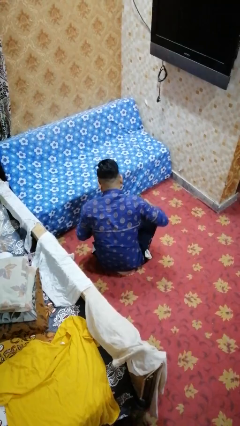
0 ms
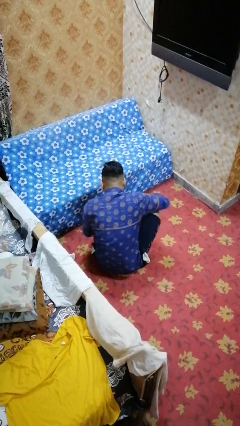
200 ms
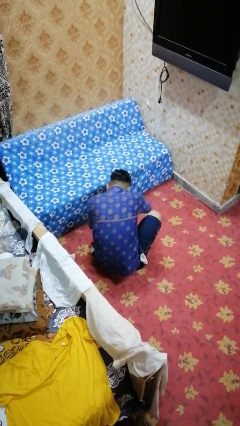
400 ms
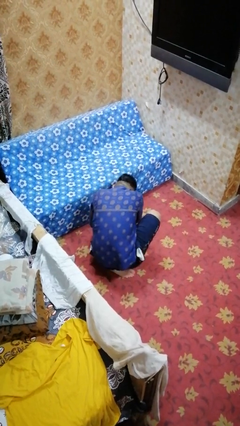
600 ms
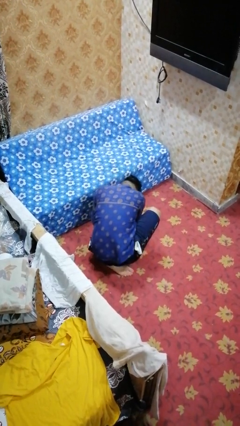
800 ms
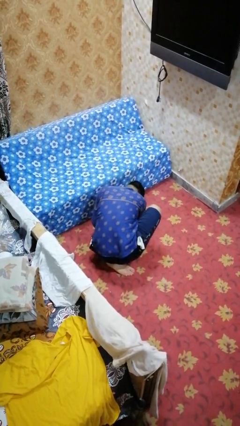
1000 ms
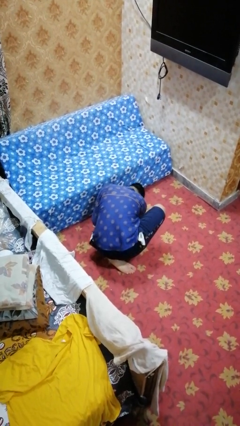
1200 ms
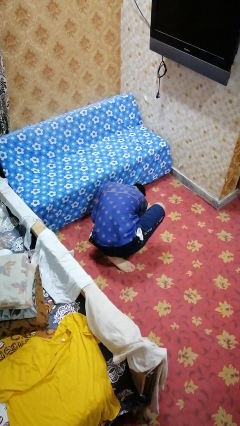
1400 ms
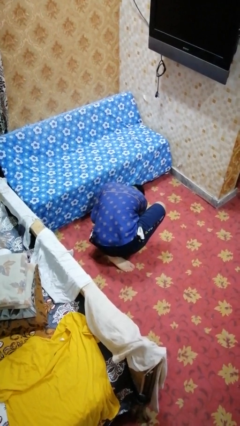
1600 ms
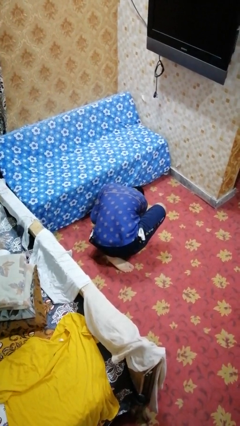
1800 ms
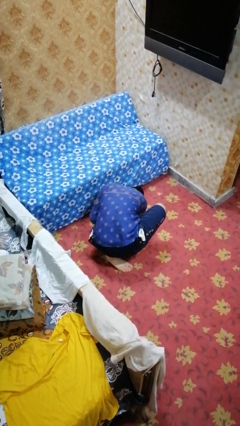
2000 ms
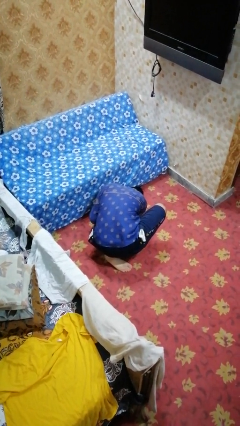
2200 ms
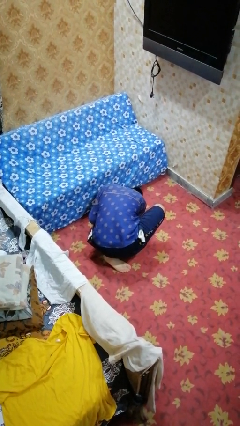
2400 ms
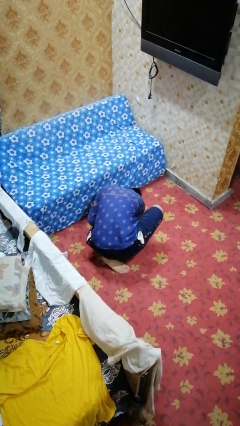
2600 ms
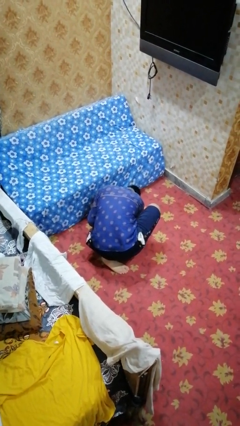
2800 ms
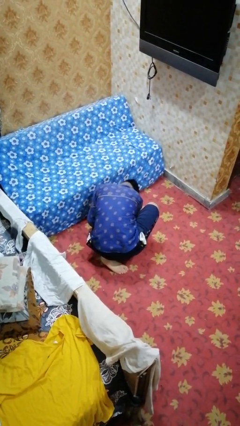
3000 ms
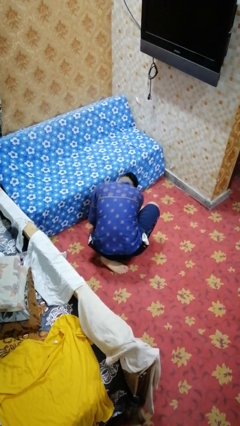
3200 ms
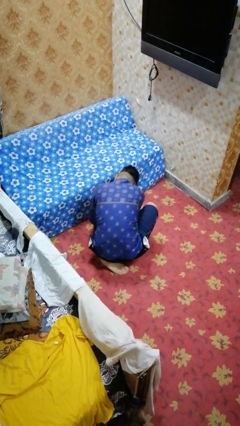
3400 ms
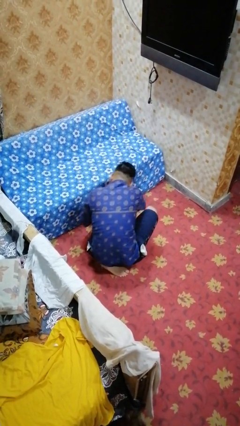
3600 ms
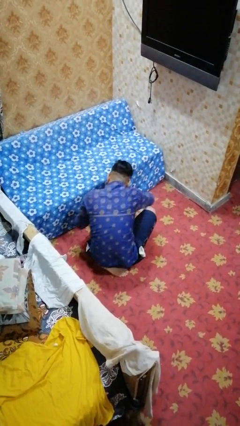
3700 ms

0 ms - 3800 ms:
person searches under couch

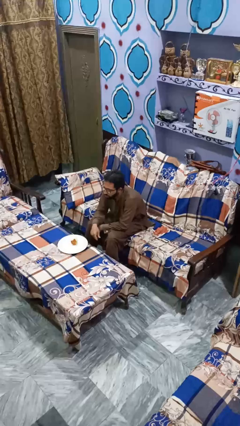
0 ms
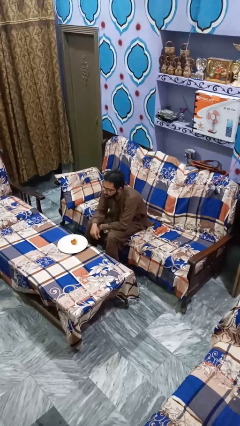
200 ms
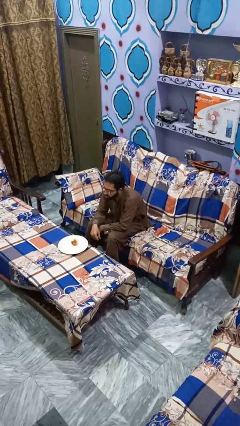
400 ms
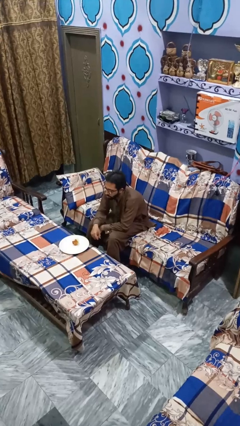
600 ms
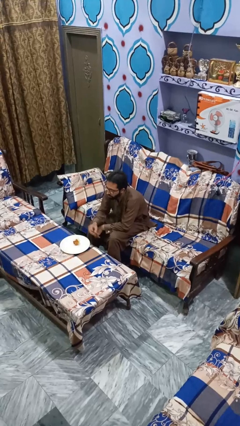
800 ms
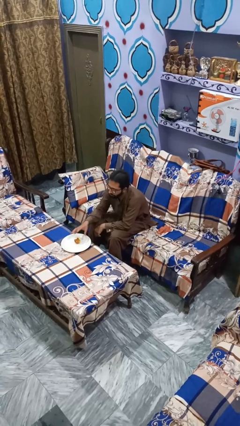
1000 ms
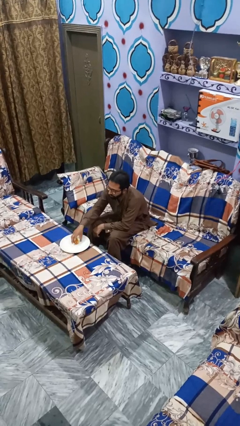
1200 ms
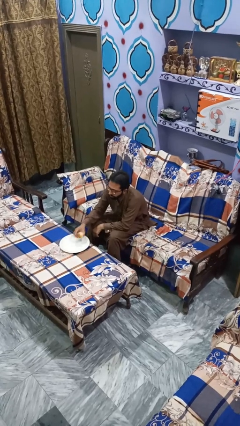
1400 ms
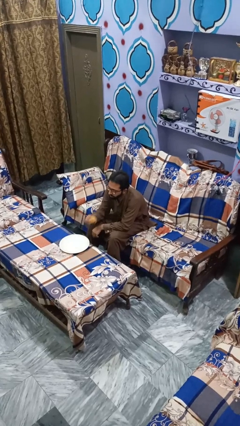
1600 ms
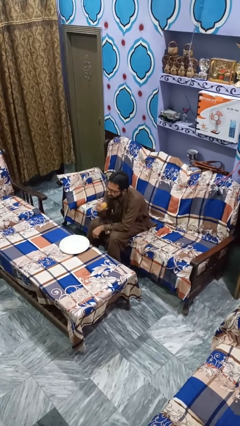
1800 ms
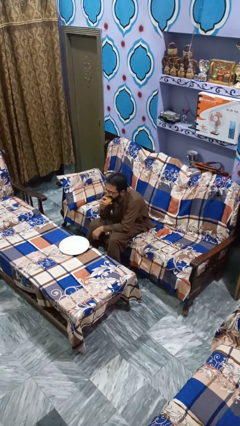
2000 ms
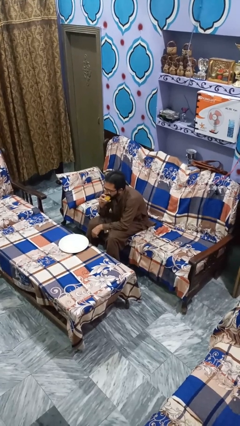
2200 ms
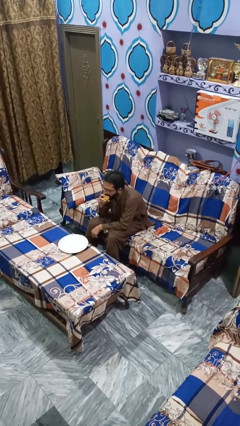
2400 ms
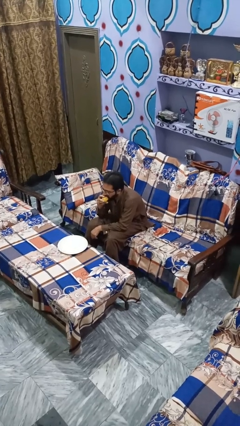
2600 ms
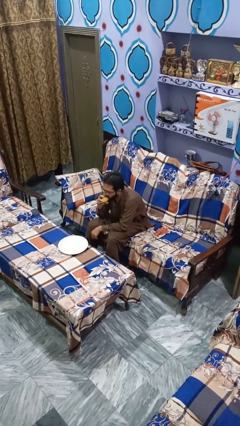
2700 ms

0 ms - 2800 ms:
person eats apple

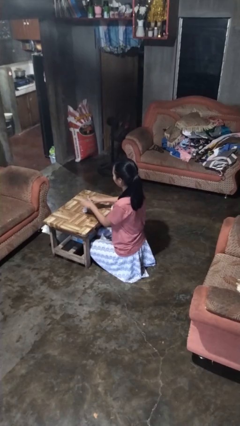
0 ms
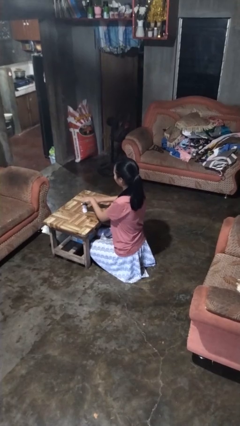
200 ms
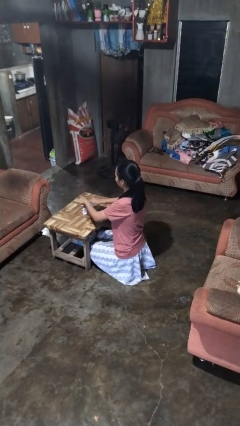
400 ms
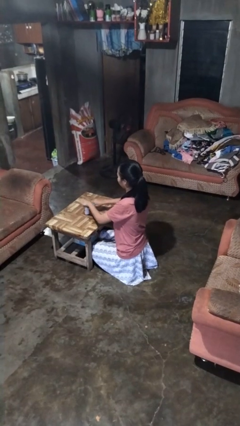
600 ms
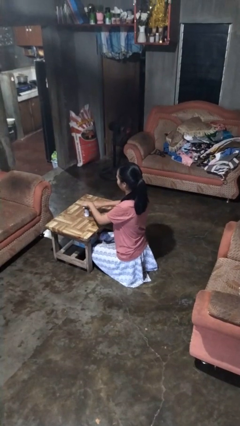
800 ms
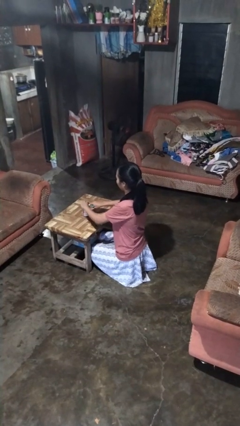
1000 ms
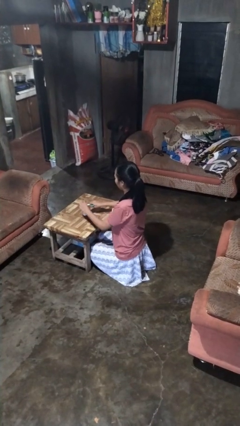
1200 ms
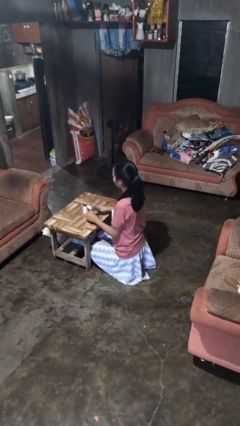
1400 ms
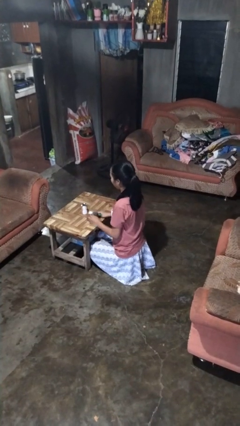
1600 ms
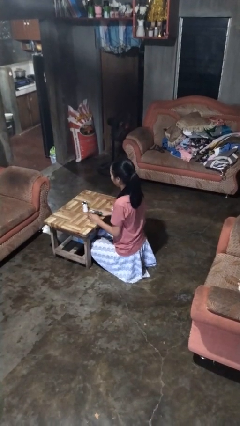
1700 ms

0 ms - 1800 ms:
person opens can with can opener

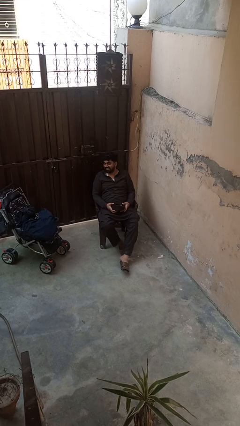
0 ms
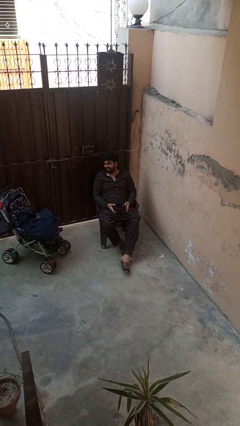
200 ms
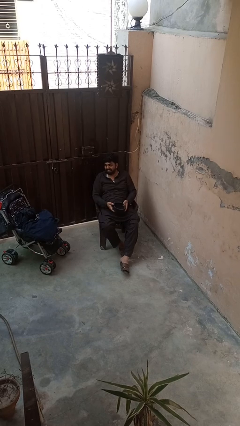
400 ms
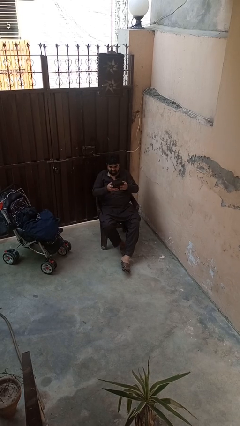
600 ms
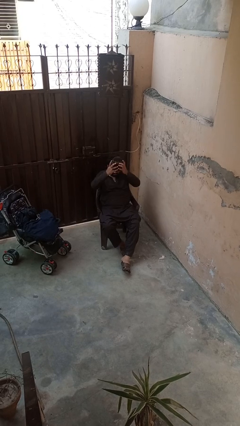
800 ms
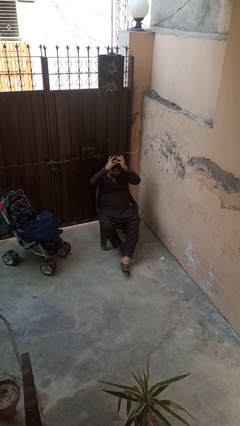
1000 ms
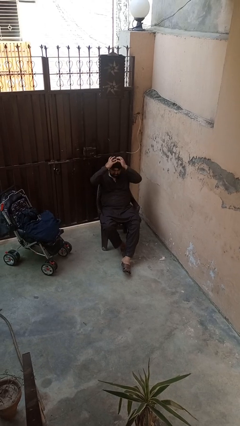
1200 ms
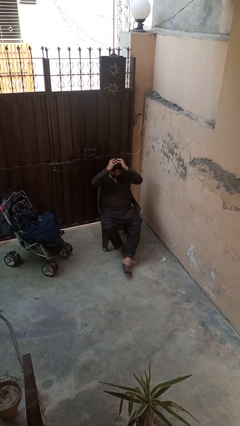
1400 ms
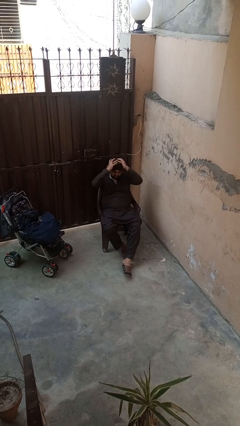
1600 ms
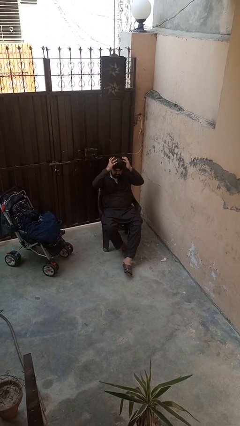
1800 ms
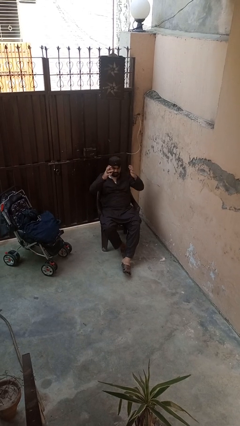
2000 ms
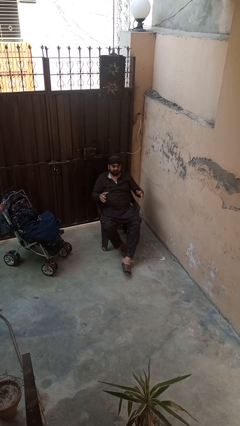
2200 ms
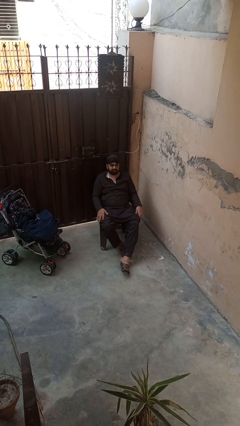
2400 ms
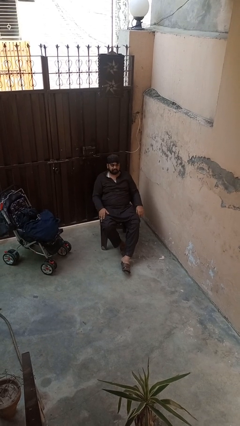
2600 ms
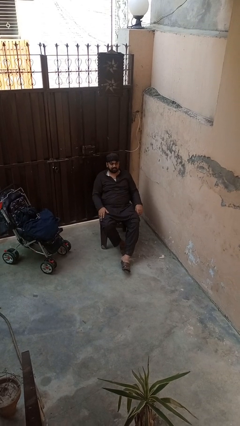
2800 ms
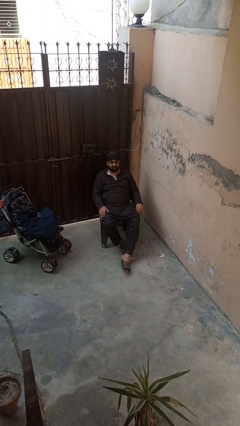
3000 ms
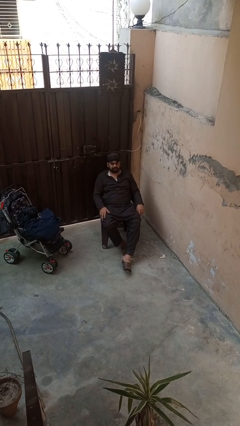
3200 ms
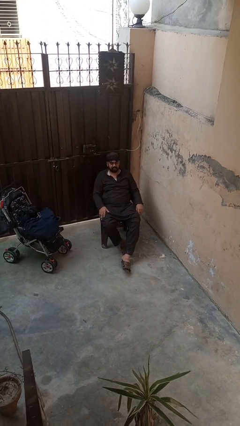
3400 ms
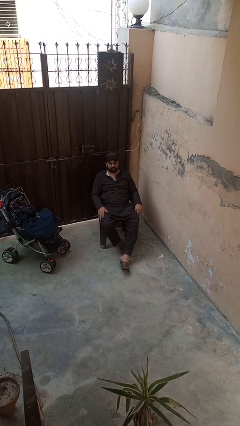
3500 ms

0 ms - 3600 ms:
person puts on hat

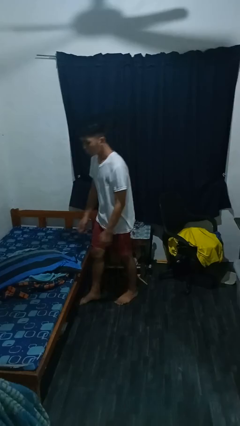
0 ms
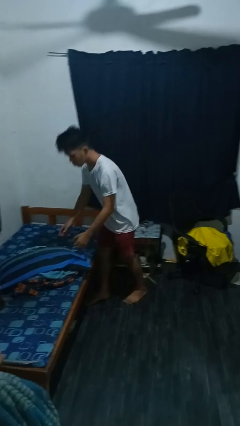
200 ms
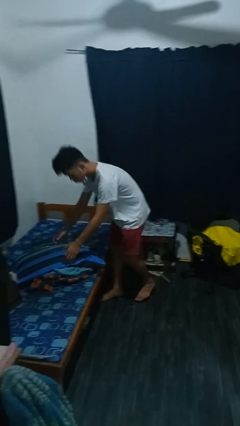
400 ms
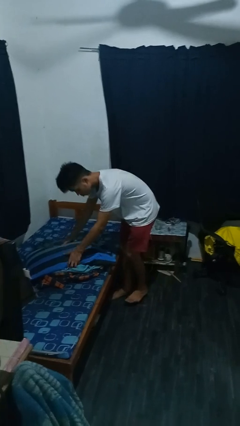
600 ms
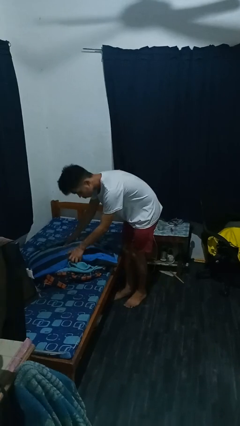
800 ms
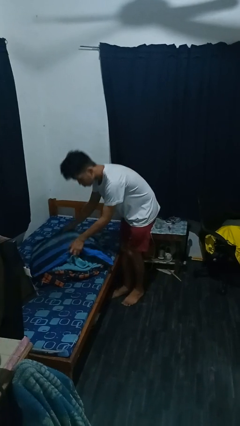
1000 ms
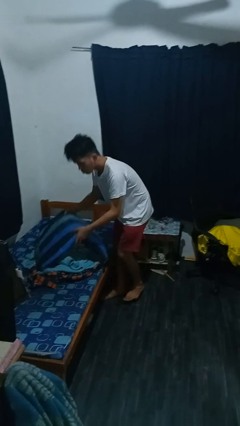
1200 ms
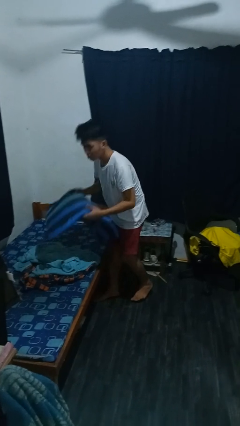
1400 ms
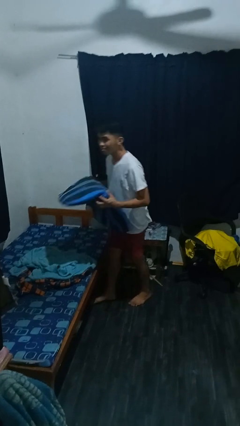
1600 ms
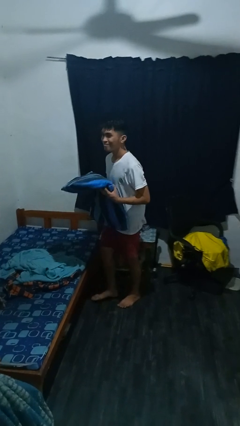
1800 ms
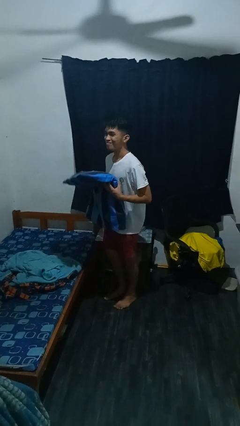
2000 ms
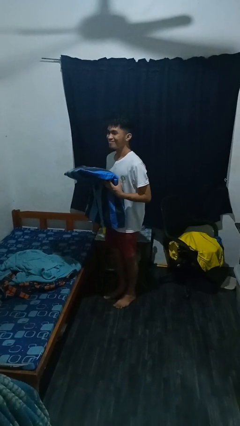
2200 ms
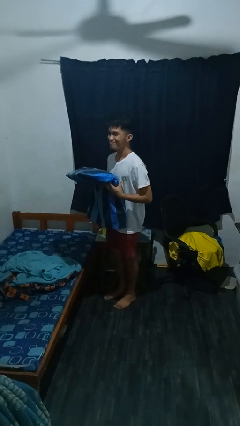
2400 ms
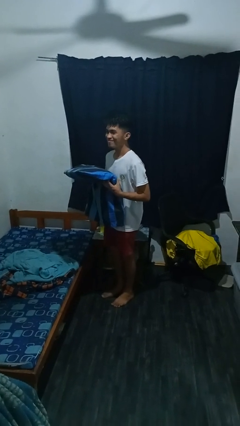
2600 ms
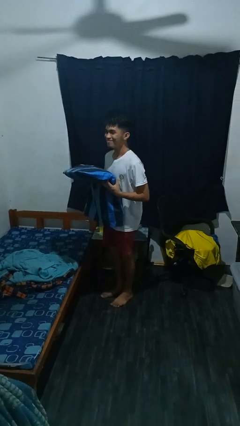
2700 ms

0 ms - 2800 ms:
person picks up object from bed

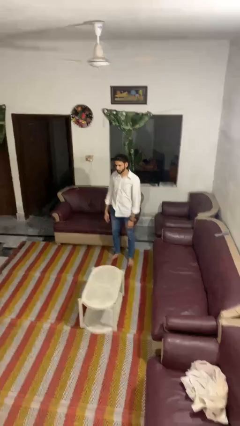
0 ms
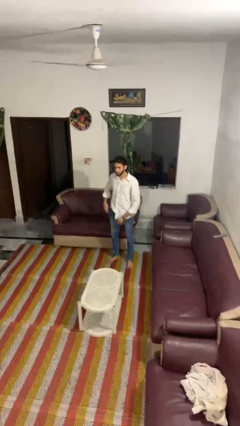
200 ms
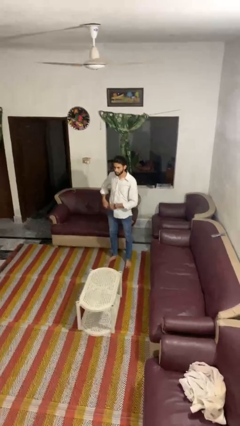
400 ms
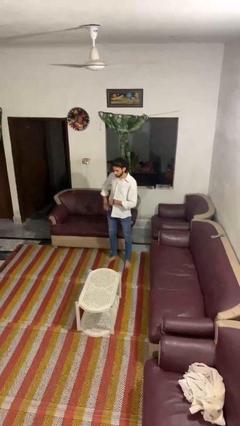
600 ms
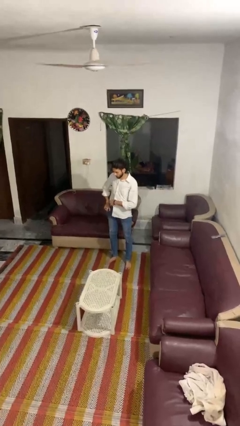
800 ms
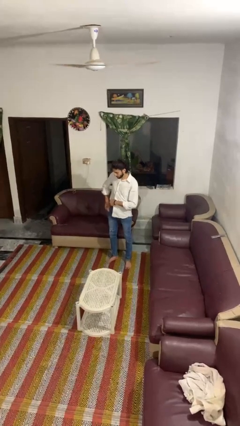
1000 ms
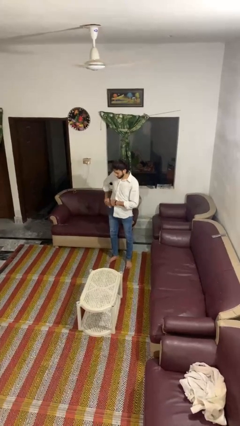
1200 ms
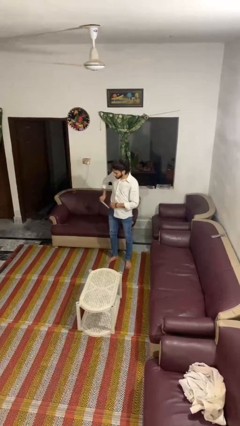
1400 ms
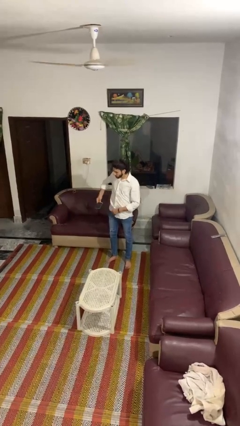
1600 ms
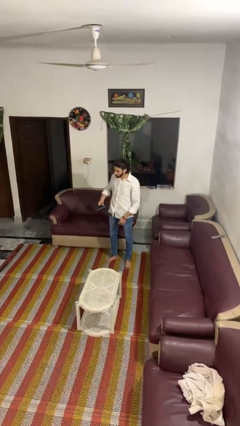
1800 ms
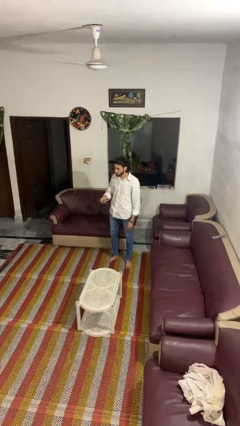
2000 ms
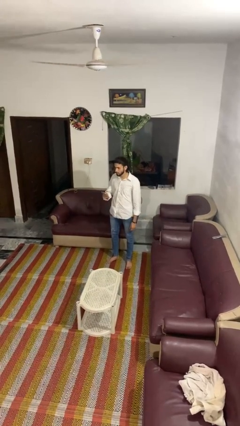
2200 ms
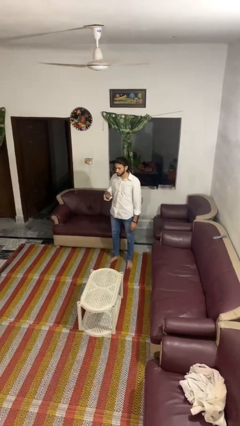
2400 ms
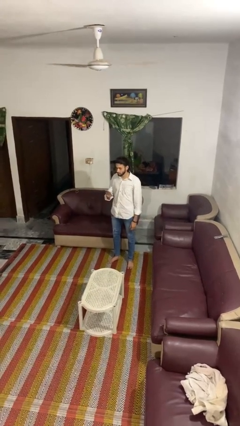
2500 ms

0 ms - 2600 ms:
person takes phone from pocket
